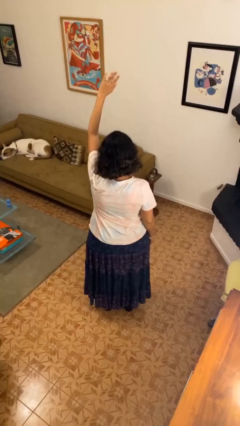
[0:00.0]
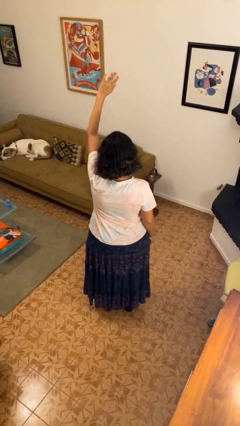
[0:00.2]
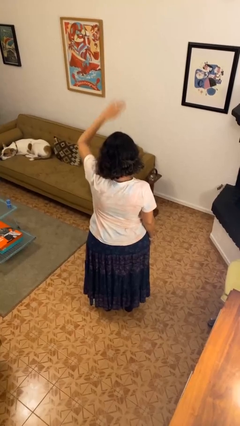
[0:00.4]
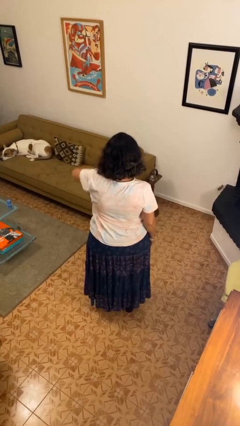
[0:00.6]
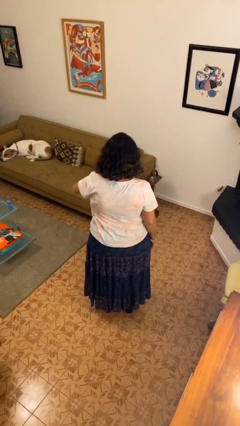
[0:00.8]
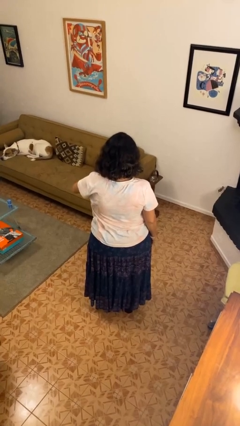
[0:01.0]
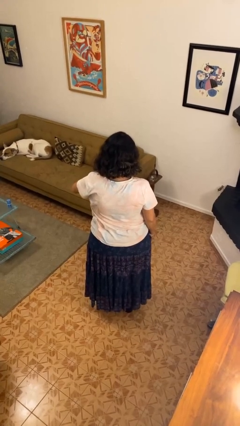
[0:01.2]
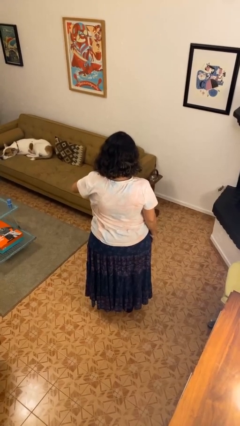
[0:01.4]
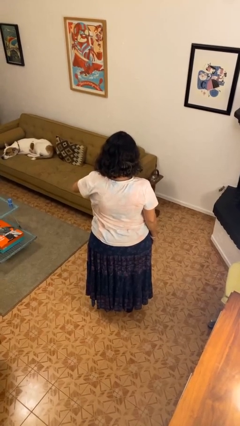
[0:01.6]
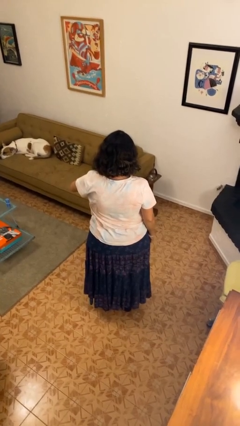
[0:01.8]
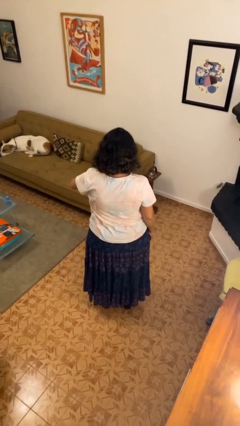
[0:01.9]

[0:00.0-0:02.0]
person gestures swipe down

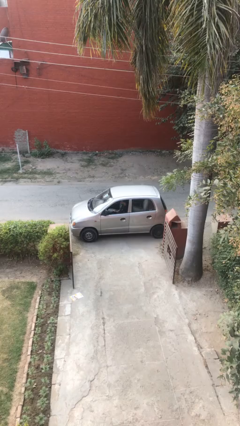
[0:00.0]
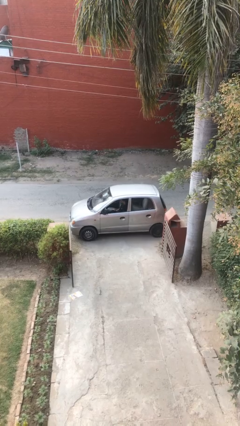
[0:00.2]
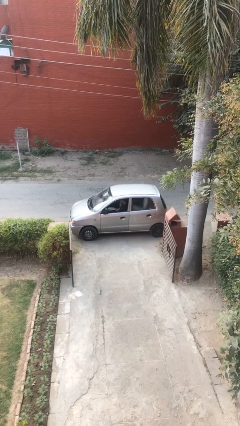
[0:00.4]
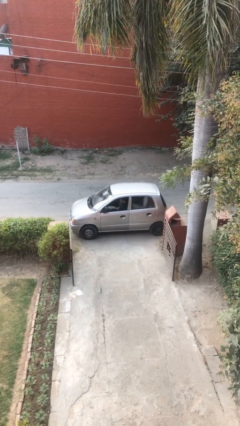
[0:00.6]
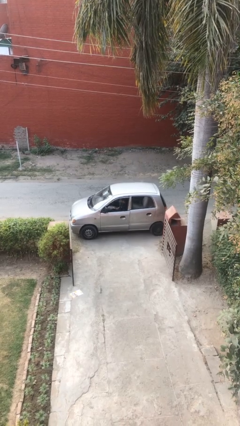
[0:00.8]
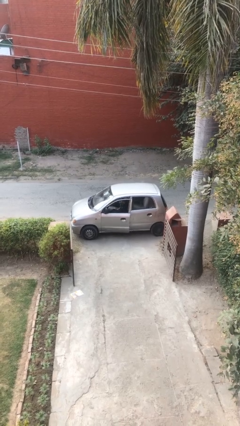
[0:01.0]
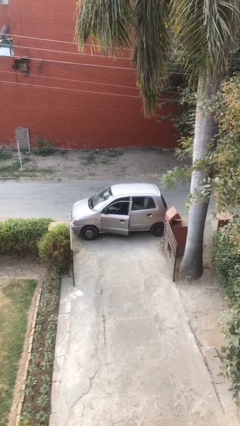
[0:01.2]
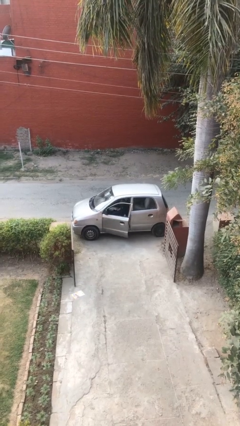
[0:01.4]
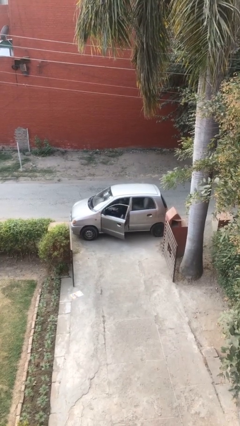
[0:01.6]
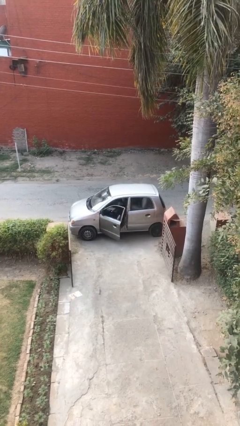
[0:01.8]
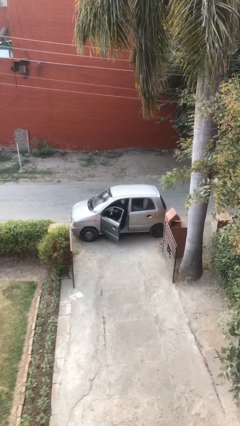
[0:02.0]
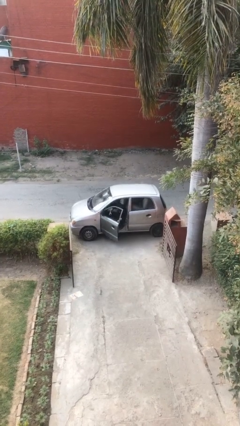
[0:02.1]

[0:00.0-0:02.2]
person opens car door

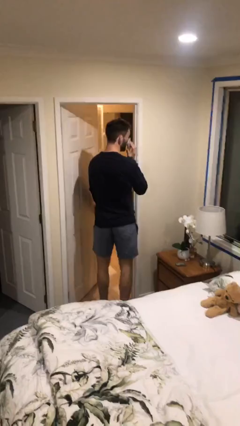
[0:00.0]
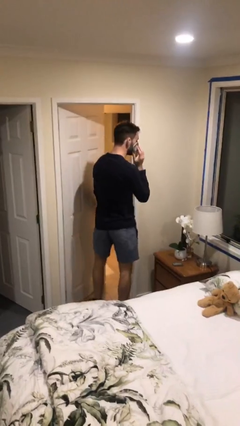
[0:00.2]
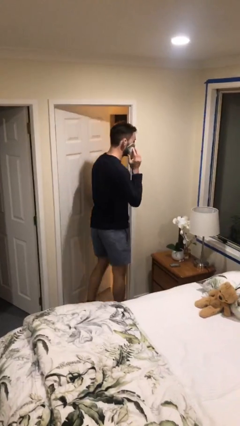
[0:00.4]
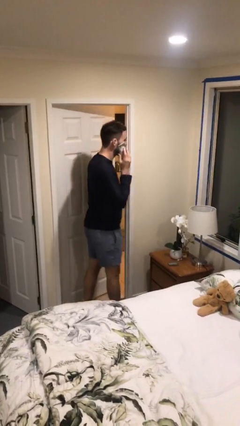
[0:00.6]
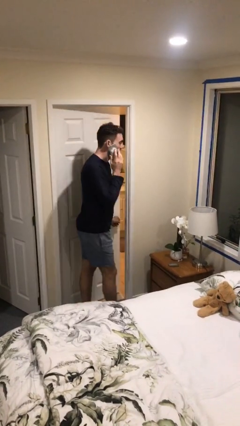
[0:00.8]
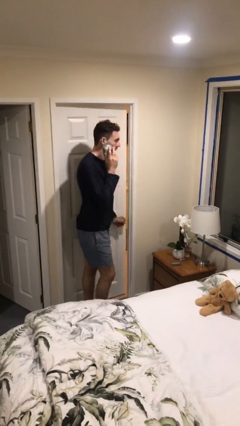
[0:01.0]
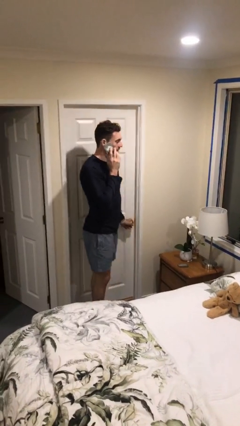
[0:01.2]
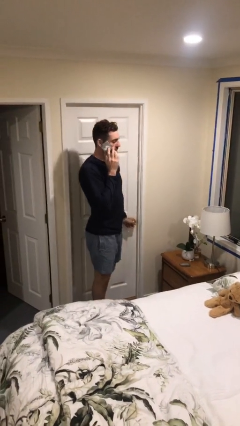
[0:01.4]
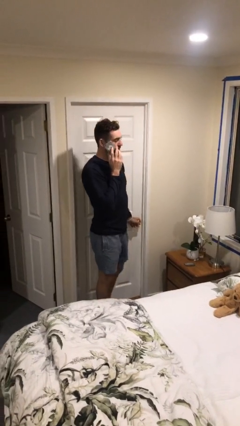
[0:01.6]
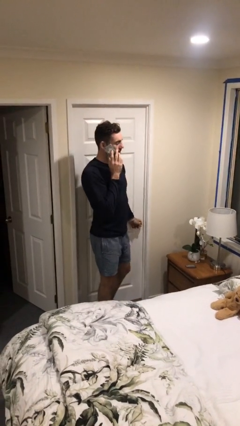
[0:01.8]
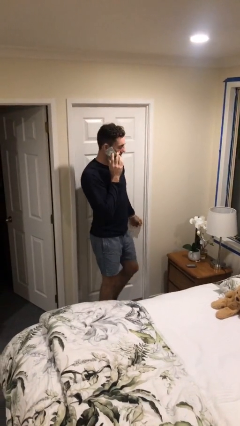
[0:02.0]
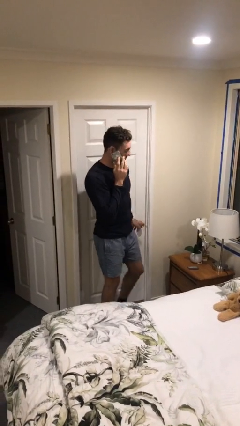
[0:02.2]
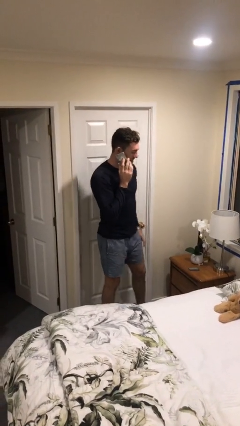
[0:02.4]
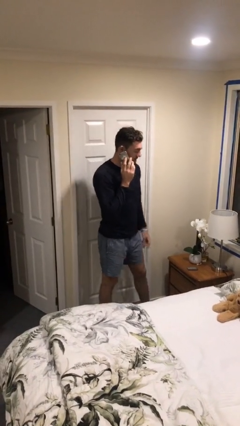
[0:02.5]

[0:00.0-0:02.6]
person closes facility door

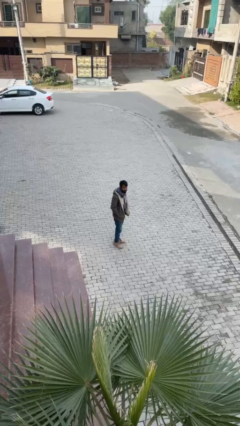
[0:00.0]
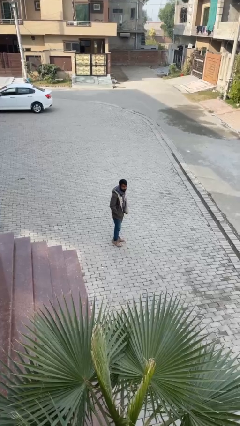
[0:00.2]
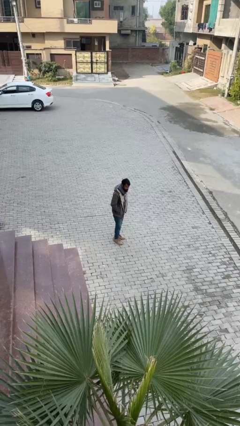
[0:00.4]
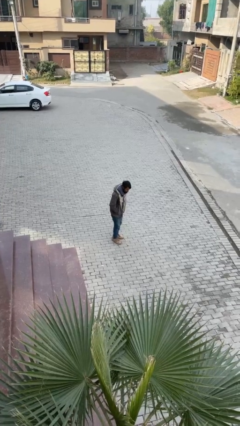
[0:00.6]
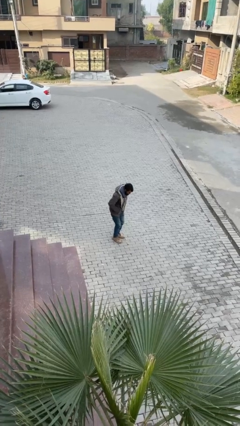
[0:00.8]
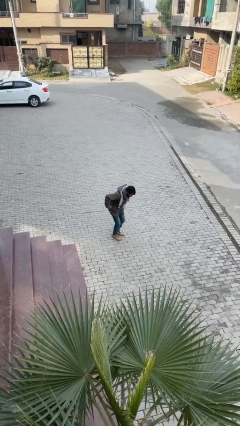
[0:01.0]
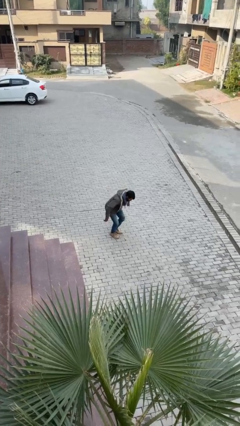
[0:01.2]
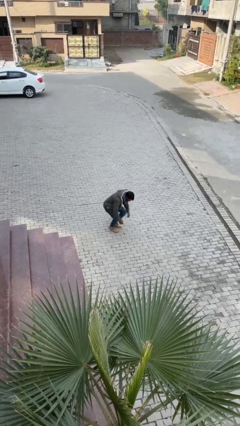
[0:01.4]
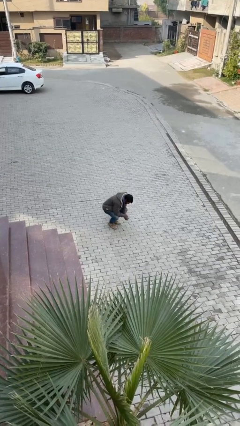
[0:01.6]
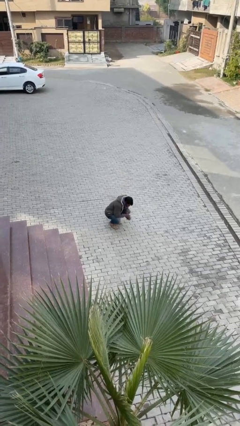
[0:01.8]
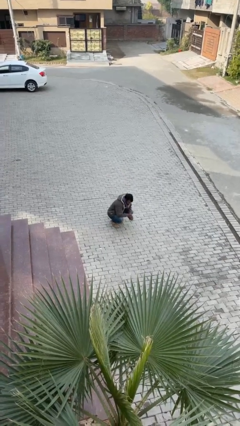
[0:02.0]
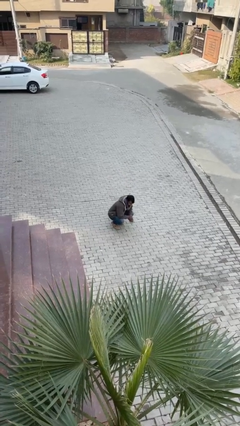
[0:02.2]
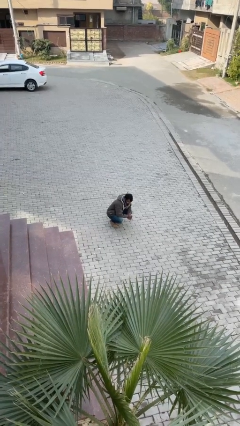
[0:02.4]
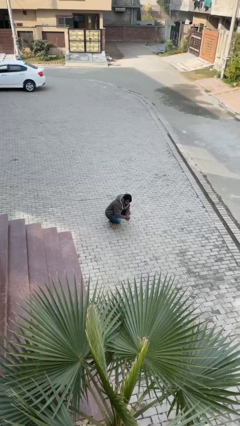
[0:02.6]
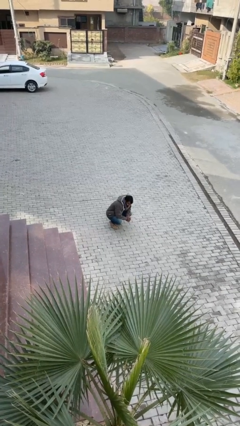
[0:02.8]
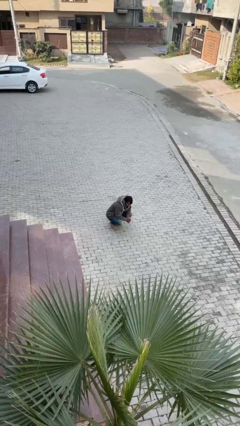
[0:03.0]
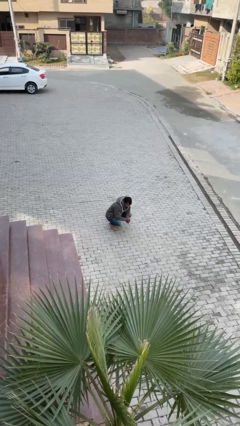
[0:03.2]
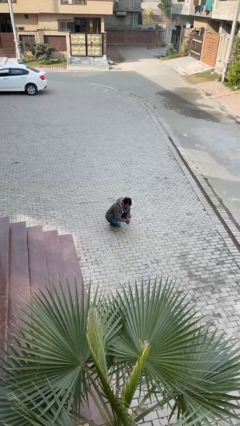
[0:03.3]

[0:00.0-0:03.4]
person sits down

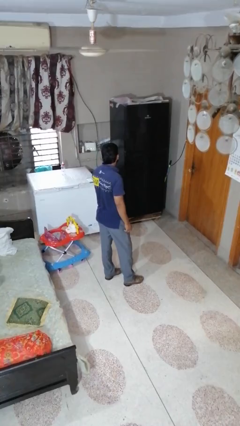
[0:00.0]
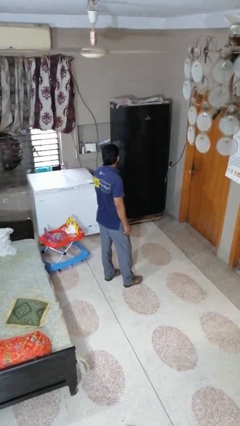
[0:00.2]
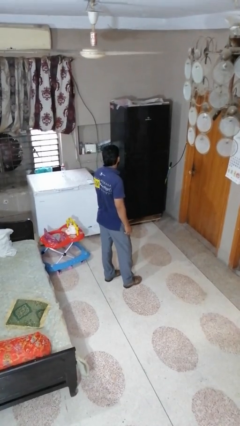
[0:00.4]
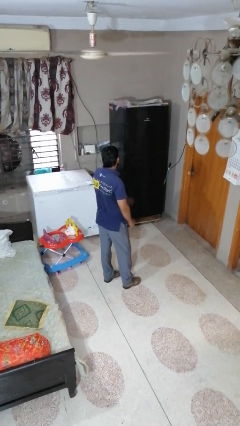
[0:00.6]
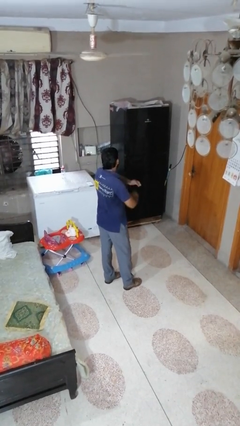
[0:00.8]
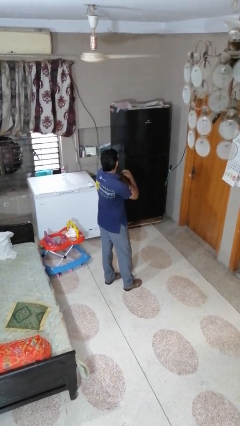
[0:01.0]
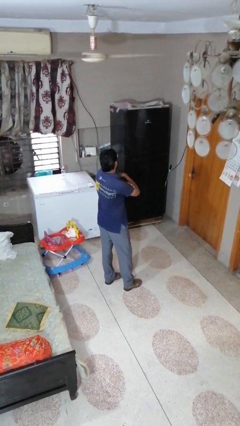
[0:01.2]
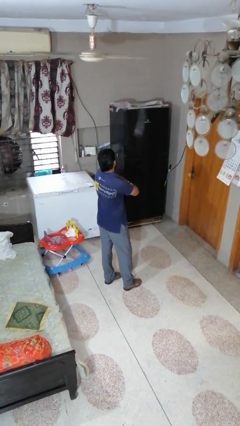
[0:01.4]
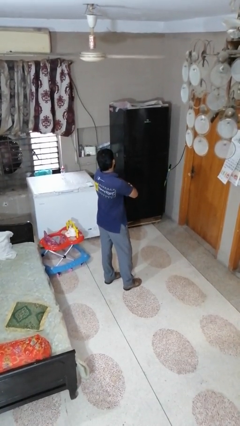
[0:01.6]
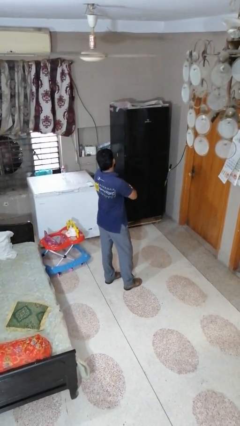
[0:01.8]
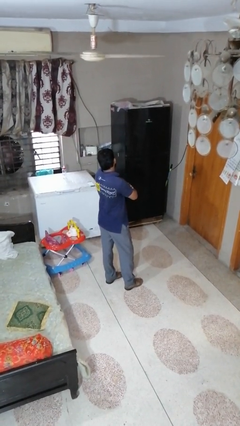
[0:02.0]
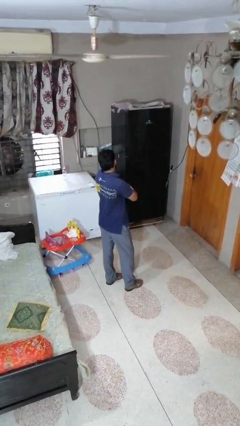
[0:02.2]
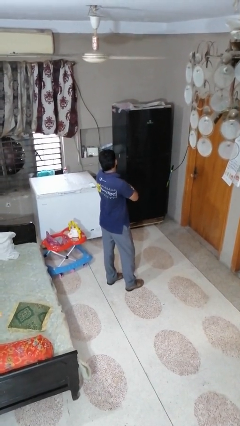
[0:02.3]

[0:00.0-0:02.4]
person crosses arms

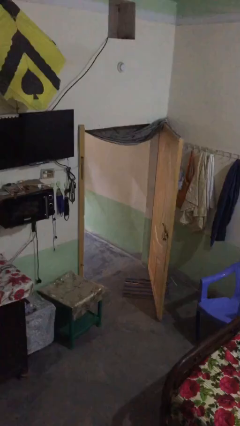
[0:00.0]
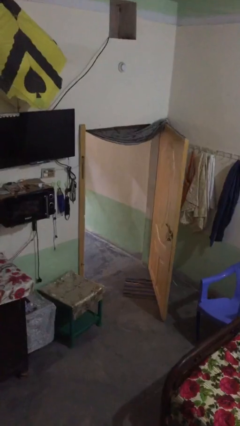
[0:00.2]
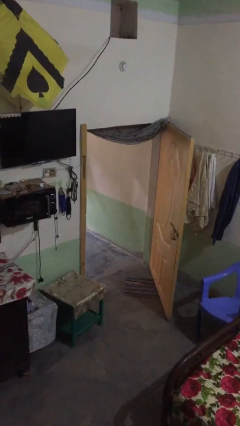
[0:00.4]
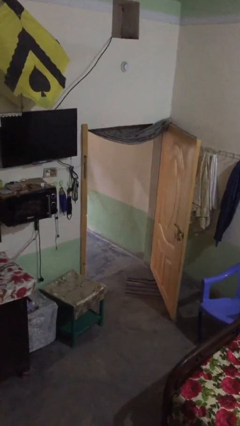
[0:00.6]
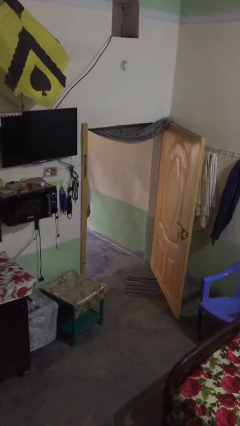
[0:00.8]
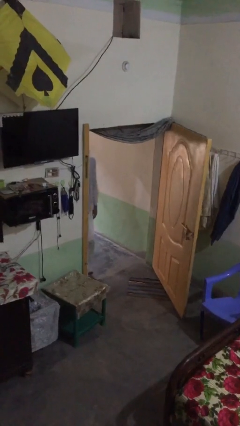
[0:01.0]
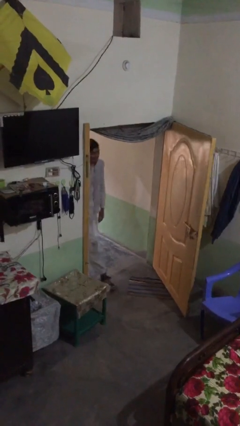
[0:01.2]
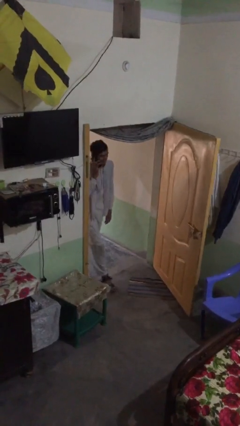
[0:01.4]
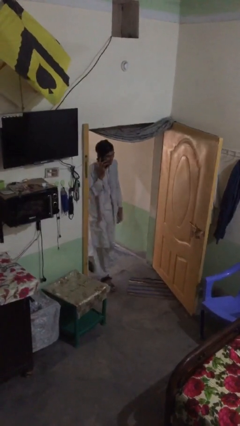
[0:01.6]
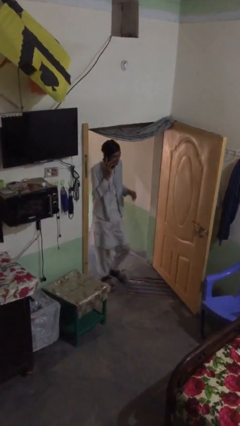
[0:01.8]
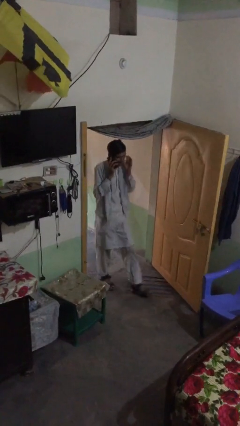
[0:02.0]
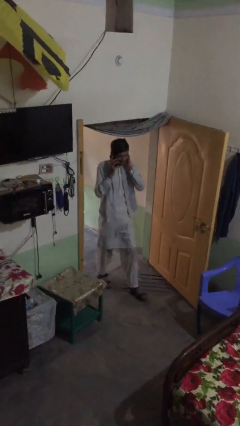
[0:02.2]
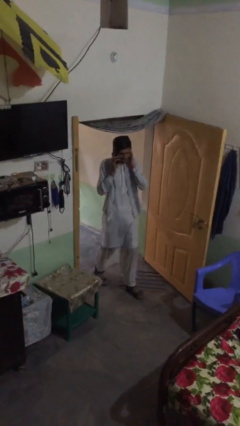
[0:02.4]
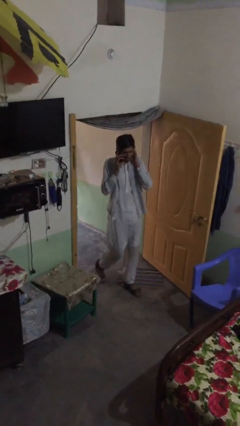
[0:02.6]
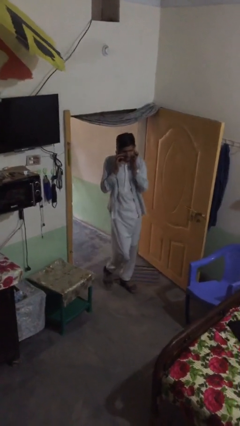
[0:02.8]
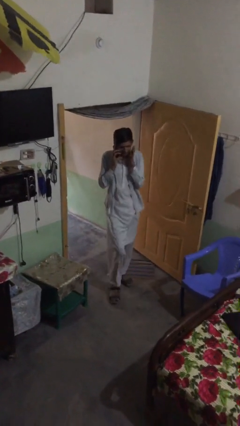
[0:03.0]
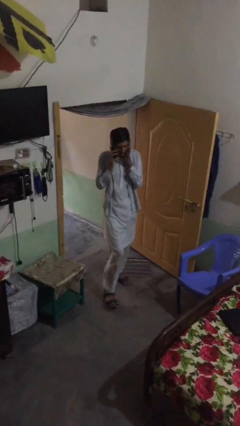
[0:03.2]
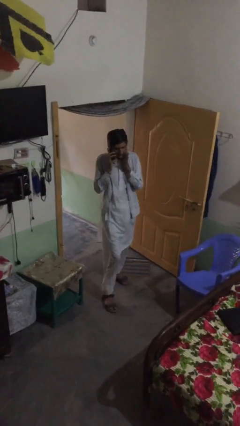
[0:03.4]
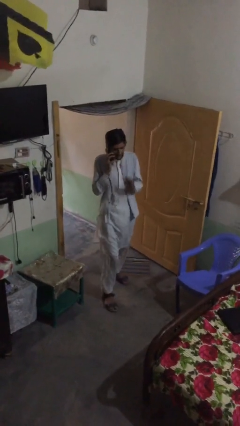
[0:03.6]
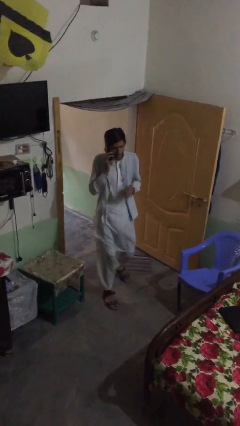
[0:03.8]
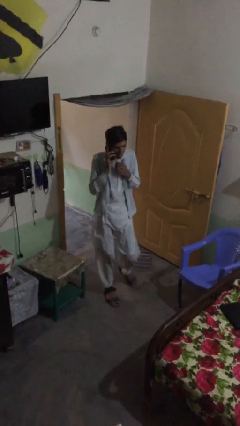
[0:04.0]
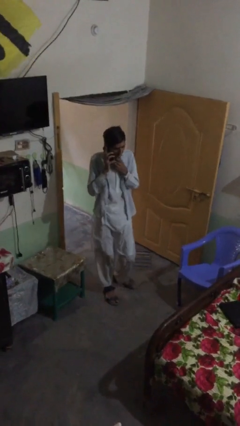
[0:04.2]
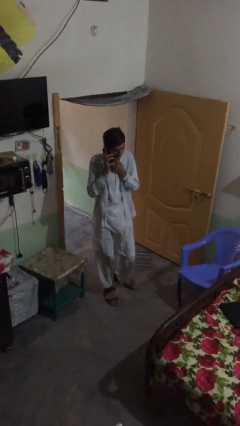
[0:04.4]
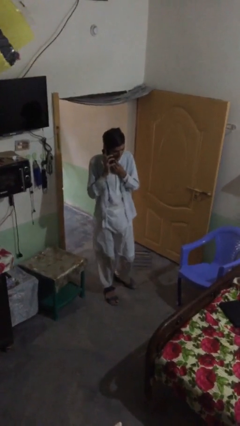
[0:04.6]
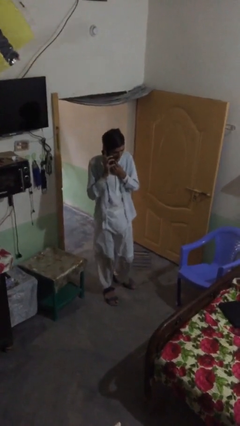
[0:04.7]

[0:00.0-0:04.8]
person enters scene through structure
